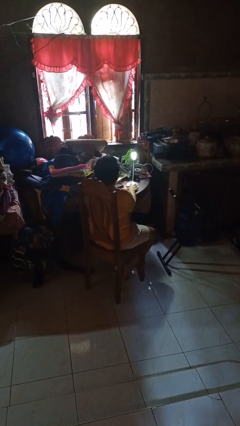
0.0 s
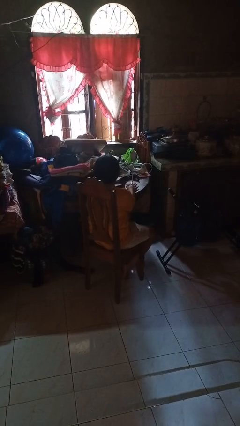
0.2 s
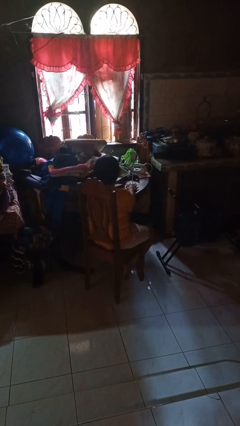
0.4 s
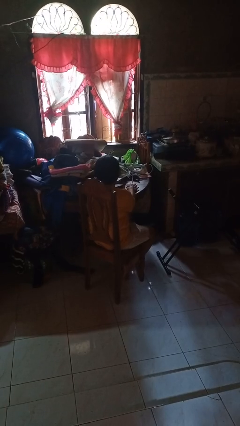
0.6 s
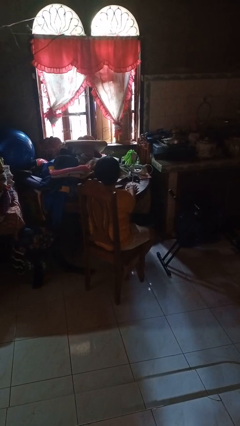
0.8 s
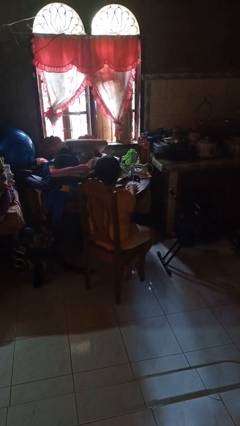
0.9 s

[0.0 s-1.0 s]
person turns off lamp

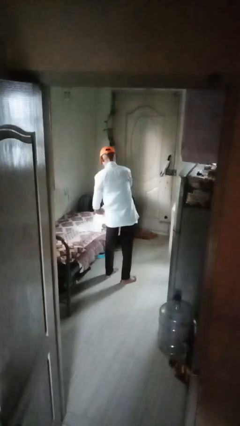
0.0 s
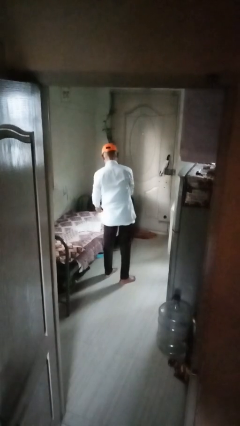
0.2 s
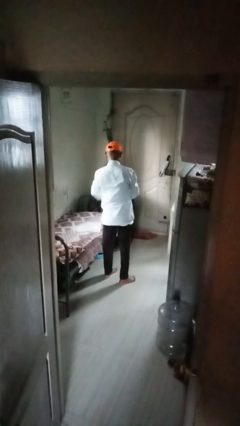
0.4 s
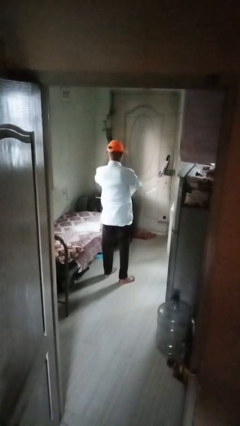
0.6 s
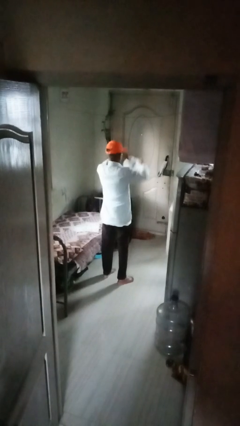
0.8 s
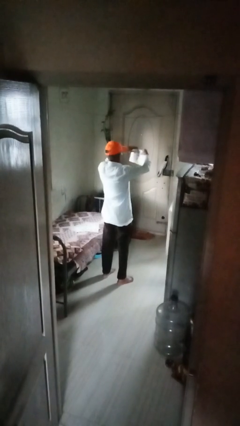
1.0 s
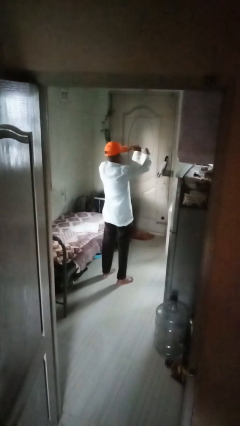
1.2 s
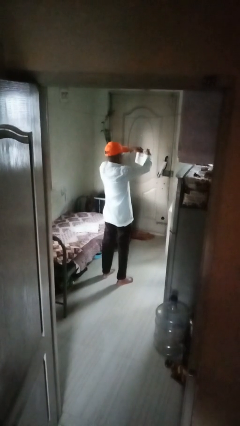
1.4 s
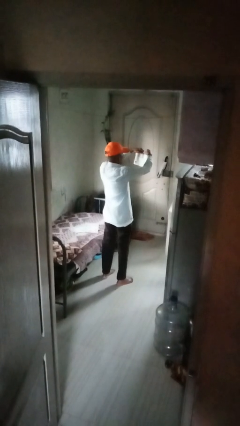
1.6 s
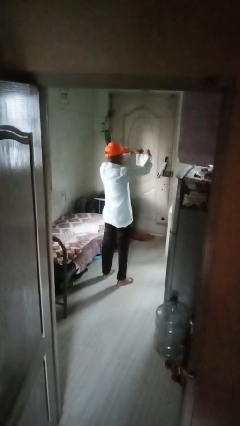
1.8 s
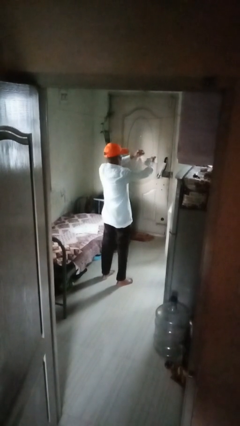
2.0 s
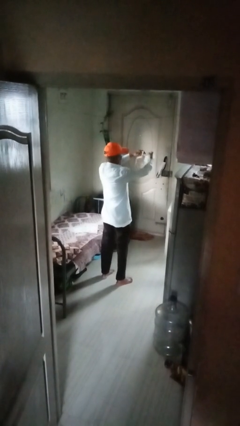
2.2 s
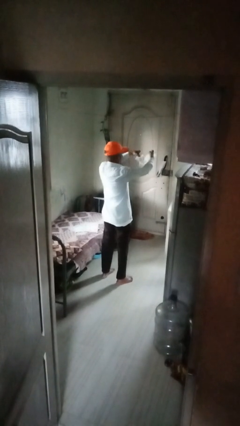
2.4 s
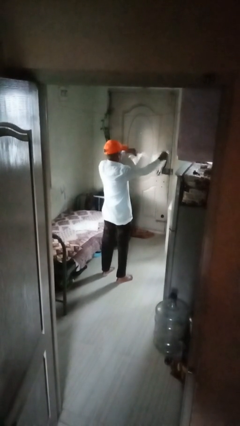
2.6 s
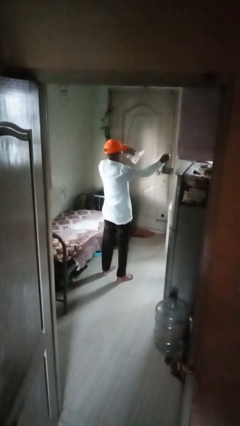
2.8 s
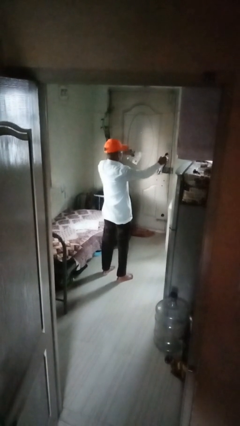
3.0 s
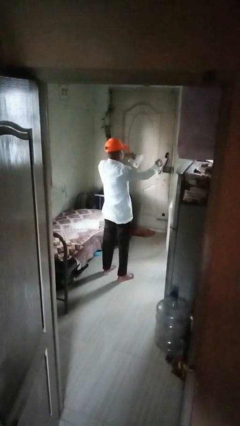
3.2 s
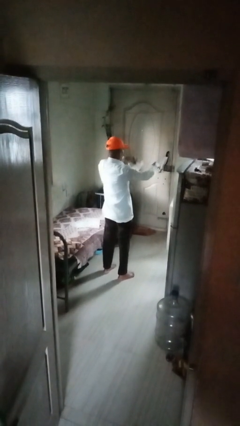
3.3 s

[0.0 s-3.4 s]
person tears paper

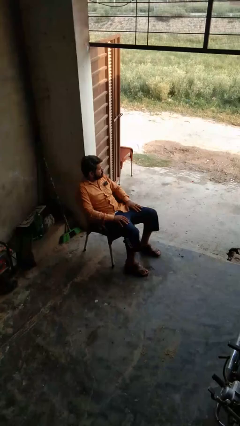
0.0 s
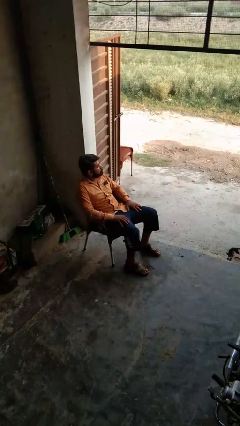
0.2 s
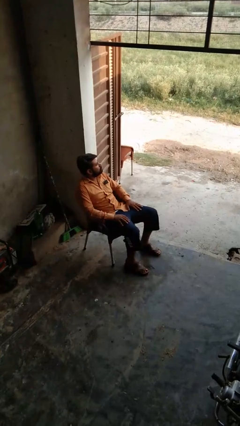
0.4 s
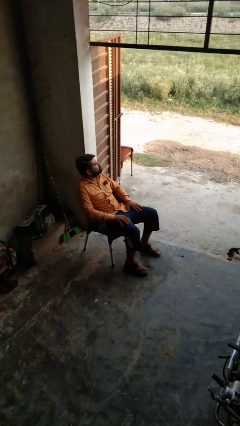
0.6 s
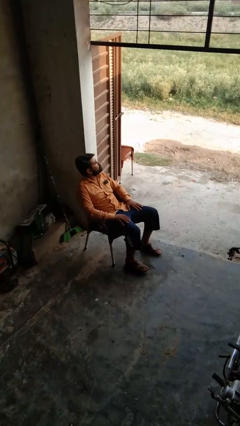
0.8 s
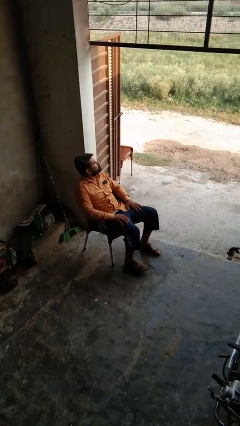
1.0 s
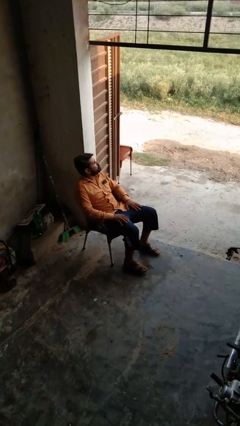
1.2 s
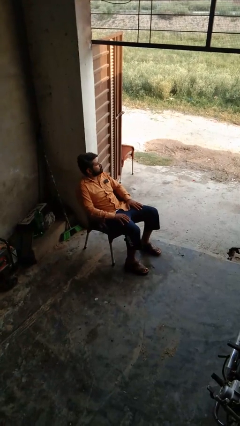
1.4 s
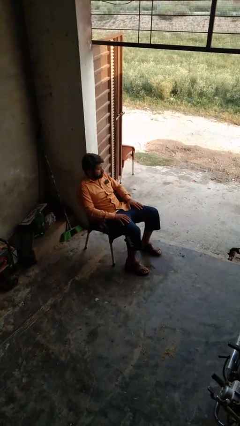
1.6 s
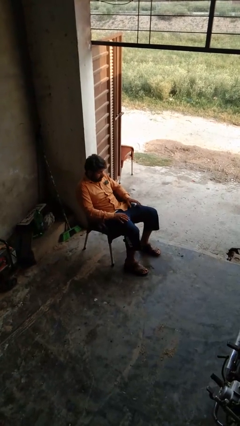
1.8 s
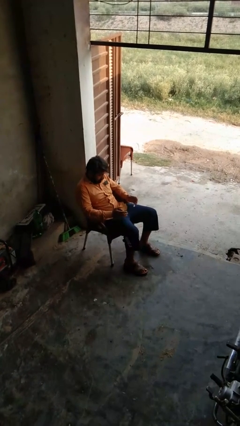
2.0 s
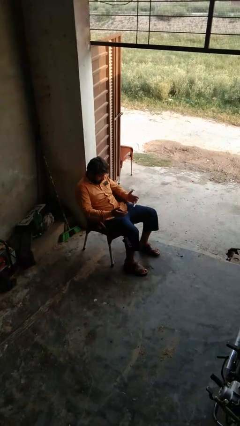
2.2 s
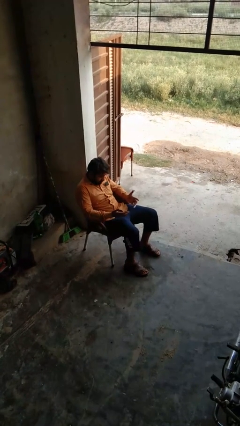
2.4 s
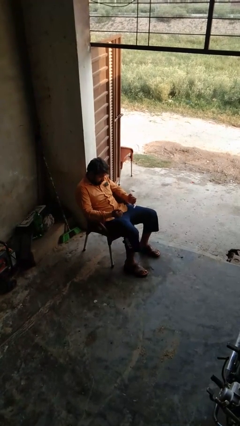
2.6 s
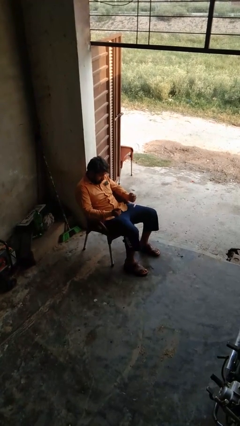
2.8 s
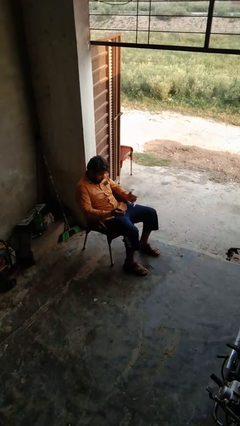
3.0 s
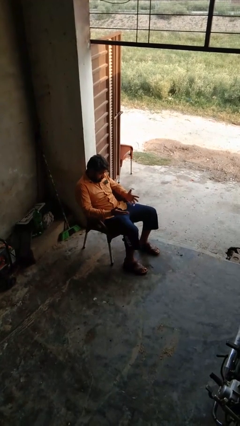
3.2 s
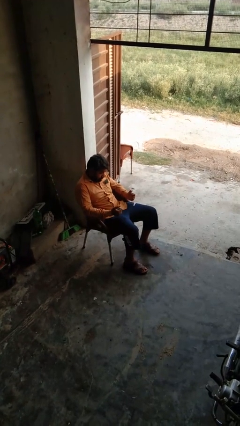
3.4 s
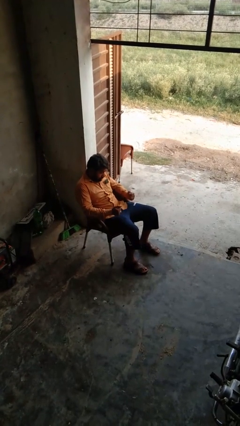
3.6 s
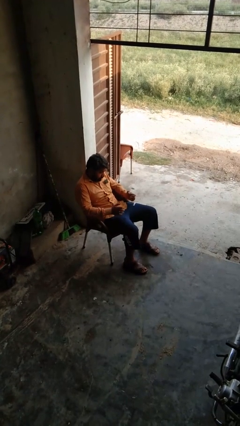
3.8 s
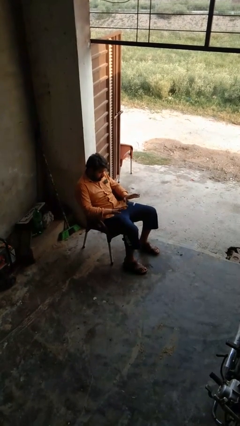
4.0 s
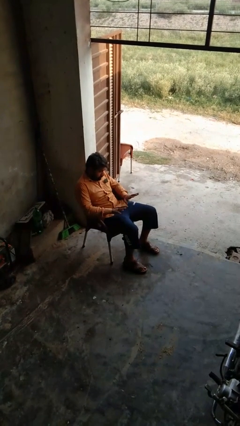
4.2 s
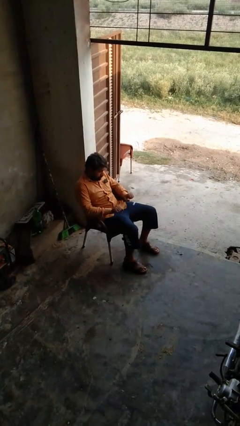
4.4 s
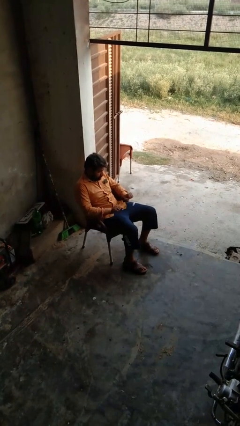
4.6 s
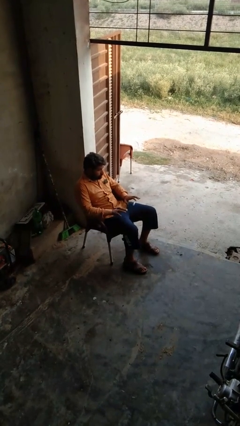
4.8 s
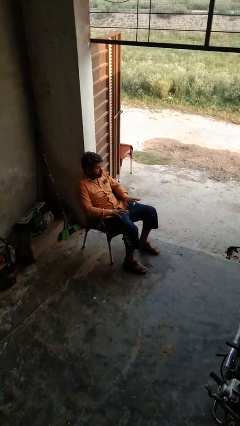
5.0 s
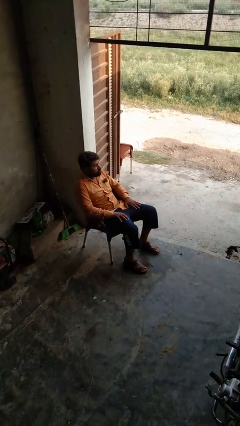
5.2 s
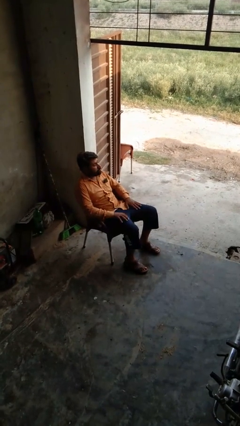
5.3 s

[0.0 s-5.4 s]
person looks at hands in lap

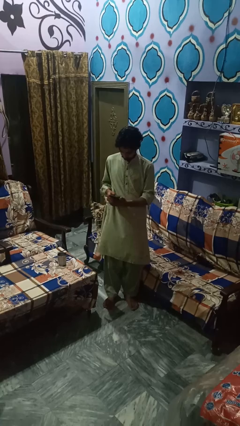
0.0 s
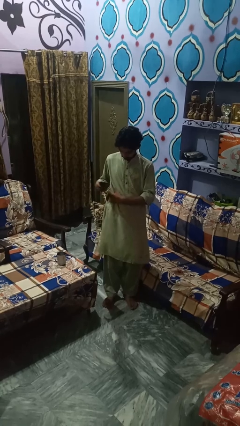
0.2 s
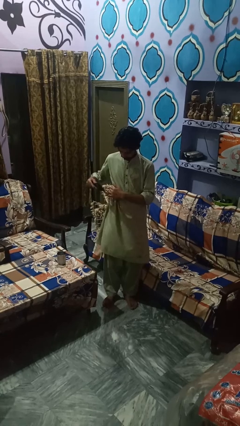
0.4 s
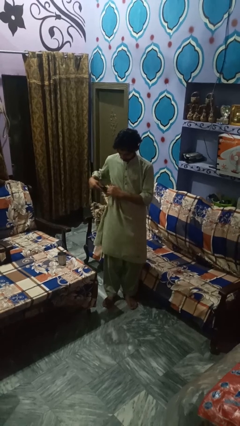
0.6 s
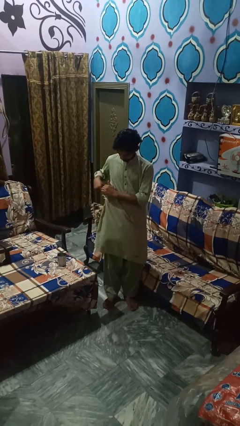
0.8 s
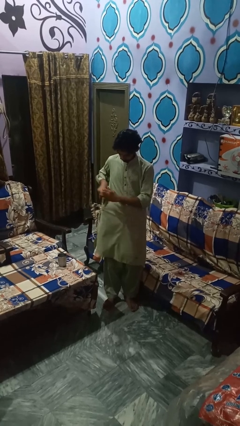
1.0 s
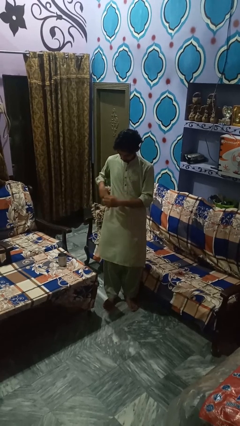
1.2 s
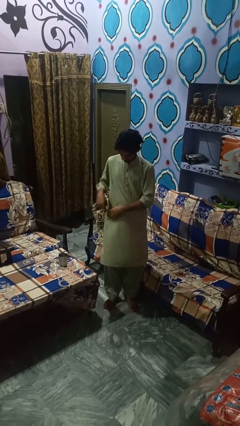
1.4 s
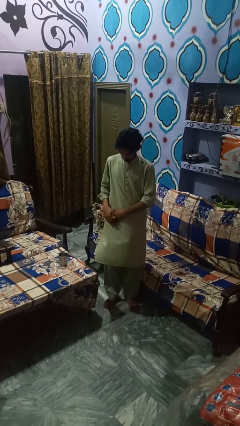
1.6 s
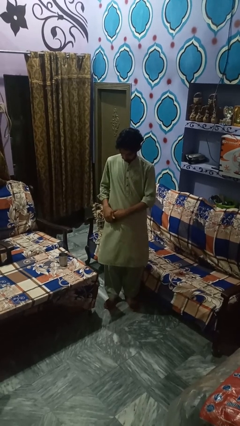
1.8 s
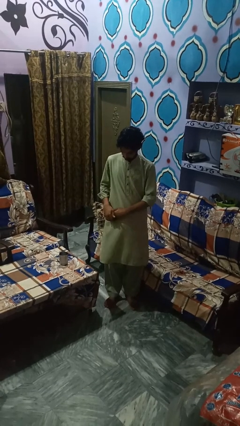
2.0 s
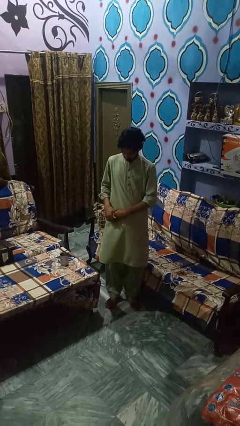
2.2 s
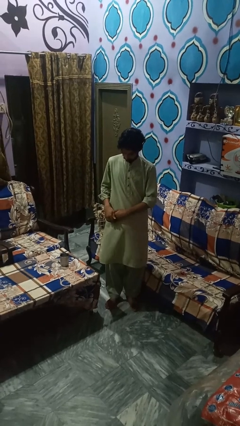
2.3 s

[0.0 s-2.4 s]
person puts phone into pocket

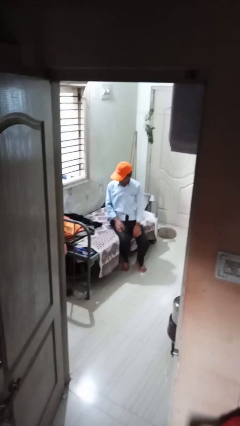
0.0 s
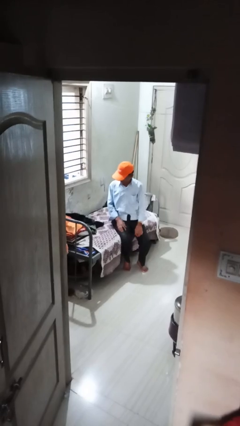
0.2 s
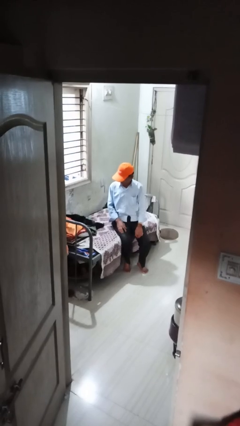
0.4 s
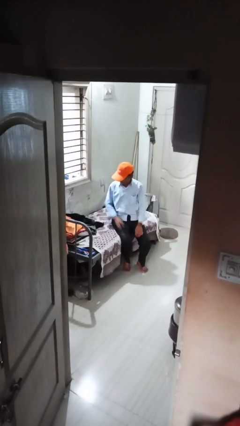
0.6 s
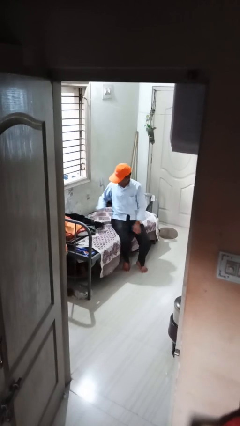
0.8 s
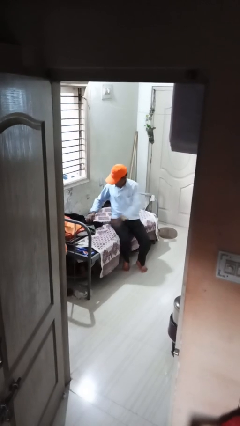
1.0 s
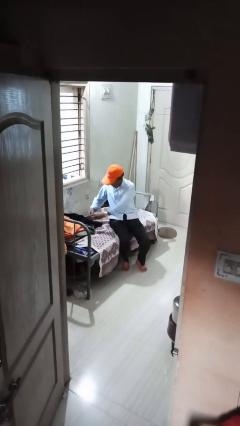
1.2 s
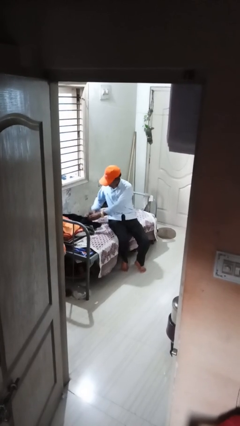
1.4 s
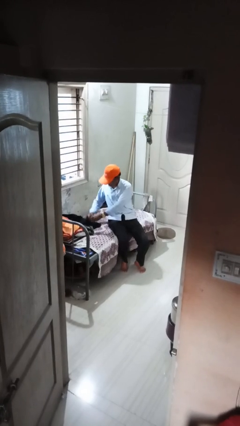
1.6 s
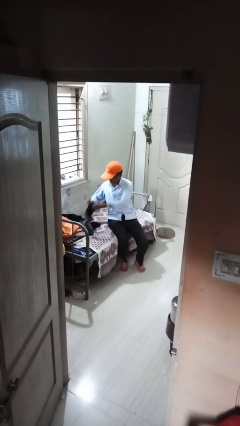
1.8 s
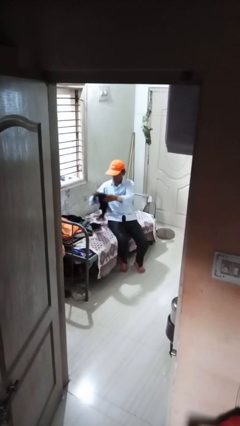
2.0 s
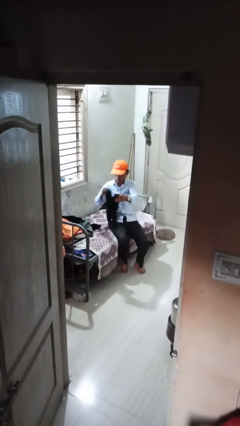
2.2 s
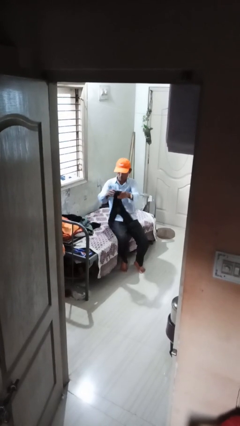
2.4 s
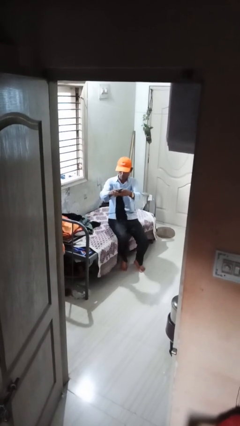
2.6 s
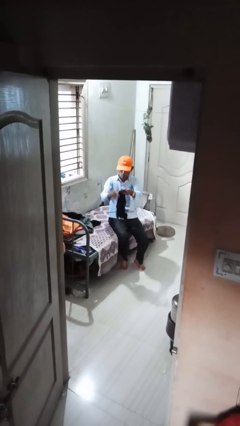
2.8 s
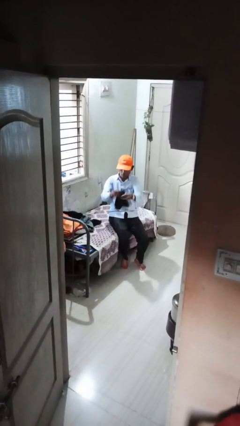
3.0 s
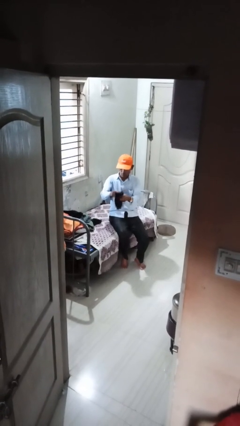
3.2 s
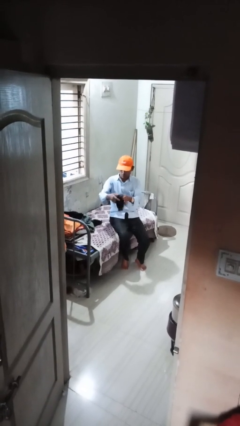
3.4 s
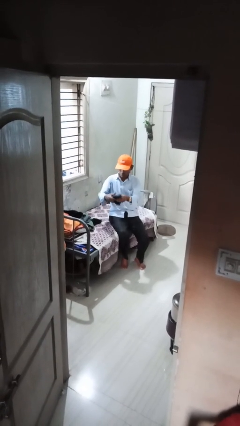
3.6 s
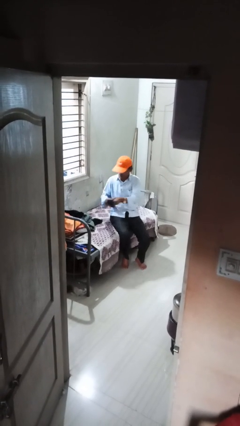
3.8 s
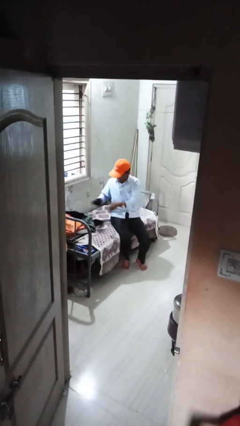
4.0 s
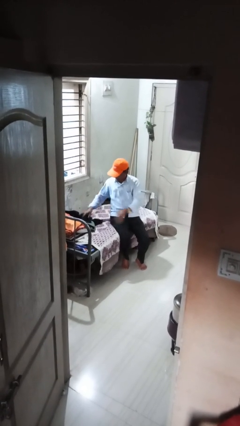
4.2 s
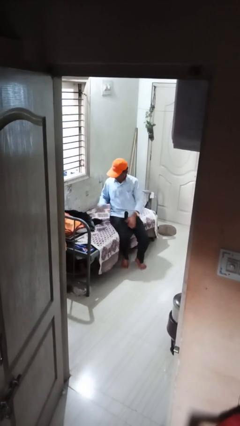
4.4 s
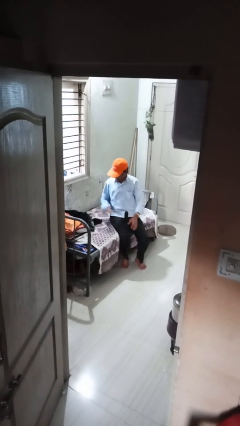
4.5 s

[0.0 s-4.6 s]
person folds socks

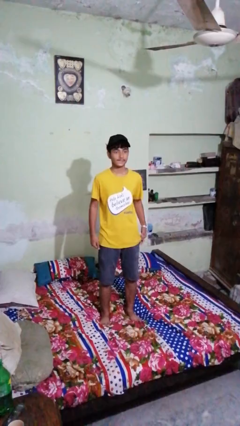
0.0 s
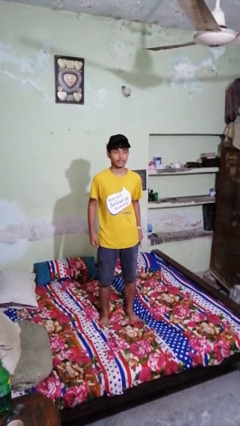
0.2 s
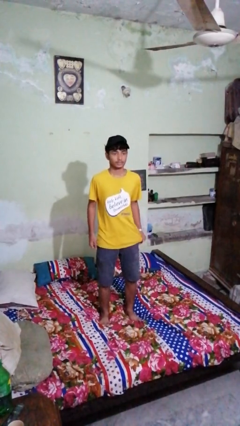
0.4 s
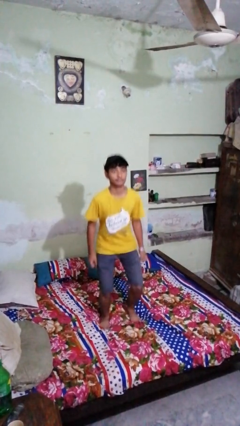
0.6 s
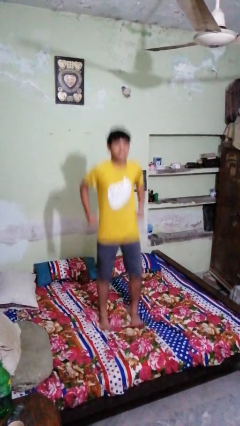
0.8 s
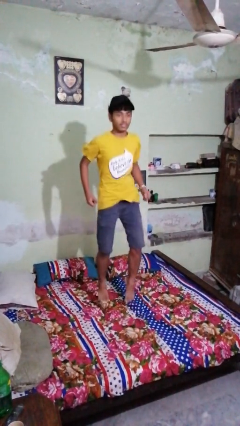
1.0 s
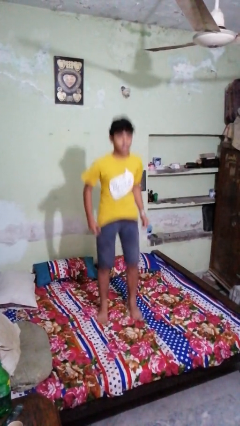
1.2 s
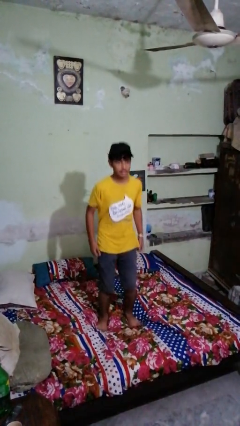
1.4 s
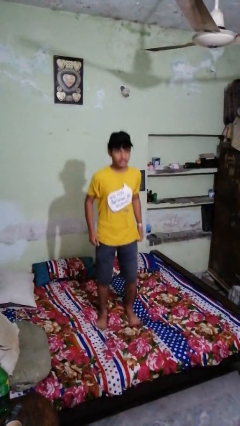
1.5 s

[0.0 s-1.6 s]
person jumps on bed
